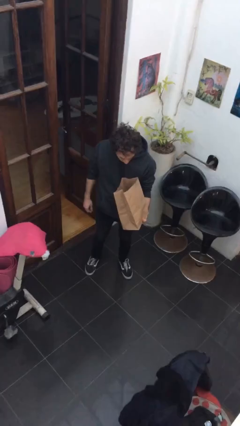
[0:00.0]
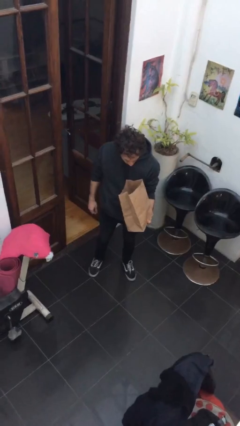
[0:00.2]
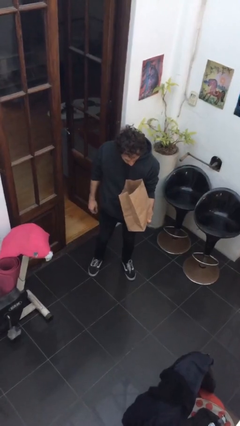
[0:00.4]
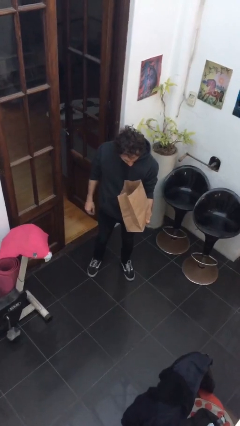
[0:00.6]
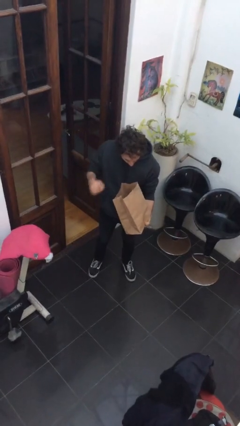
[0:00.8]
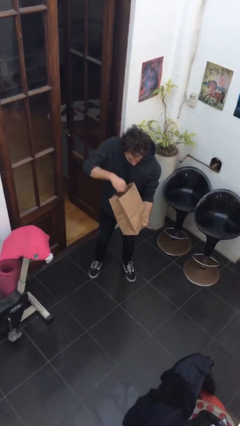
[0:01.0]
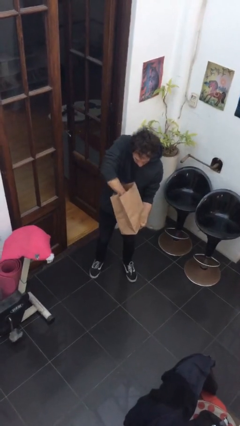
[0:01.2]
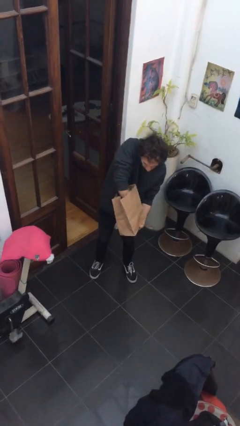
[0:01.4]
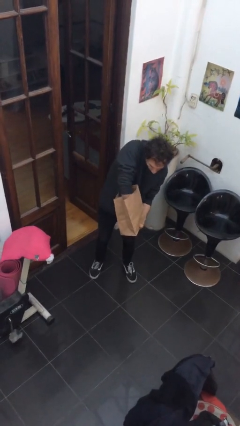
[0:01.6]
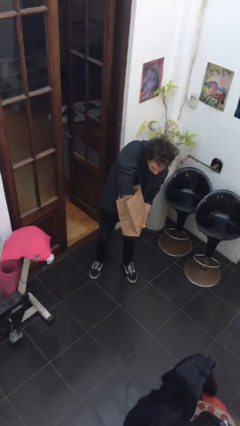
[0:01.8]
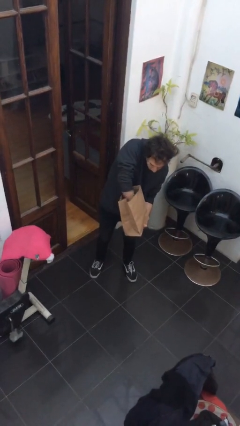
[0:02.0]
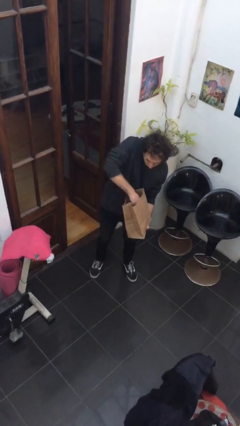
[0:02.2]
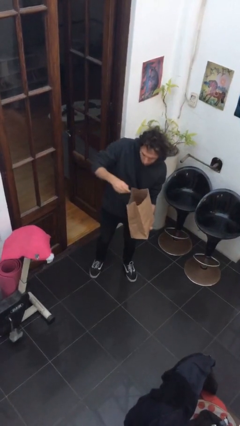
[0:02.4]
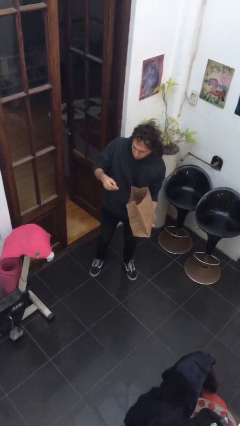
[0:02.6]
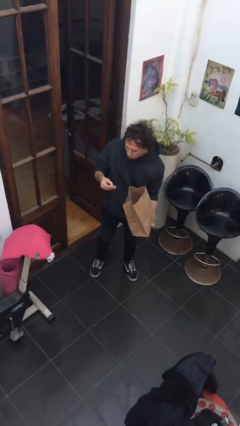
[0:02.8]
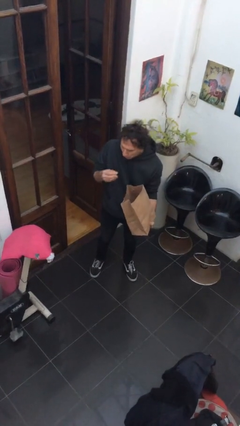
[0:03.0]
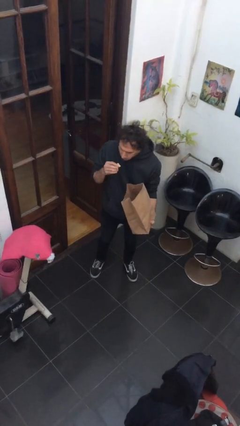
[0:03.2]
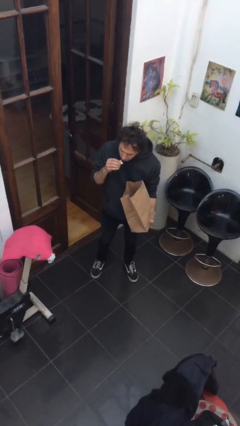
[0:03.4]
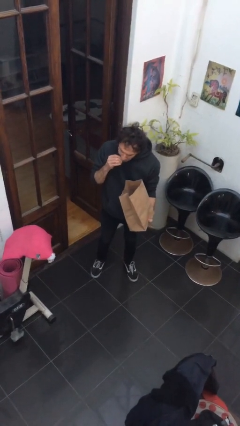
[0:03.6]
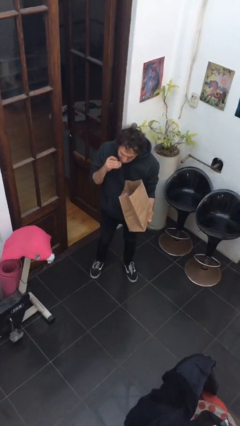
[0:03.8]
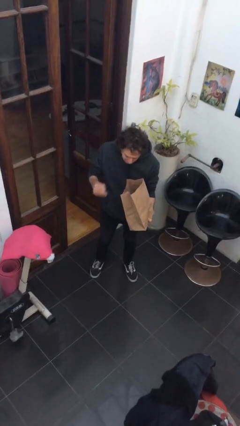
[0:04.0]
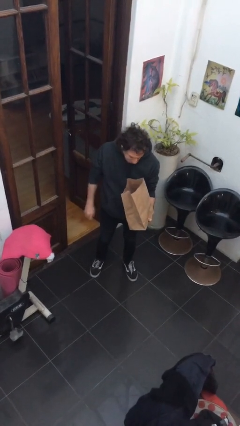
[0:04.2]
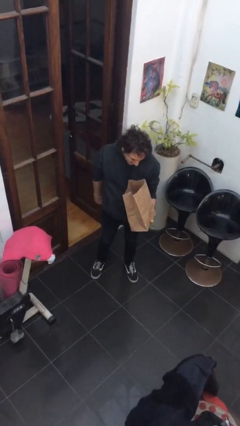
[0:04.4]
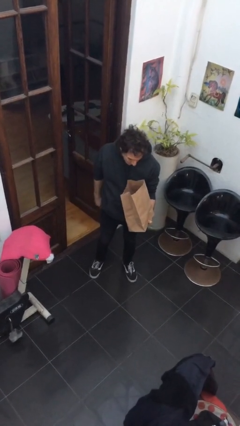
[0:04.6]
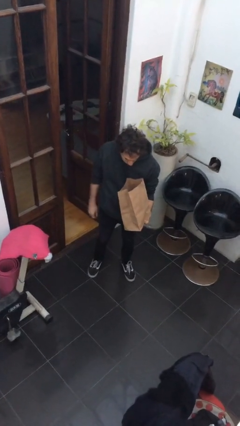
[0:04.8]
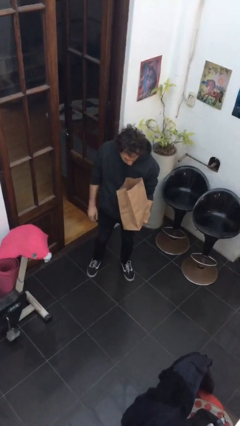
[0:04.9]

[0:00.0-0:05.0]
person eats snack from bag

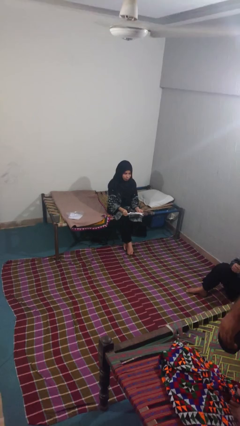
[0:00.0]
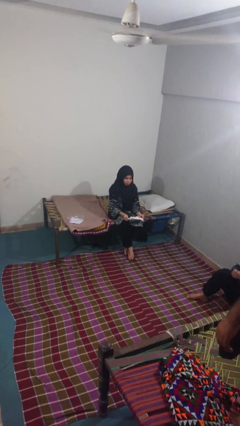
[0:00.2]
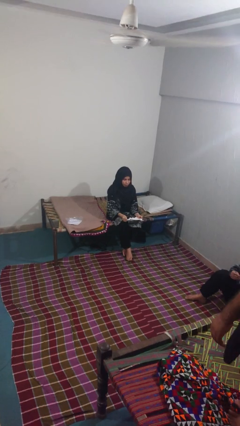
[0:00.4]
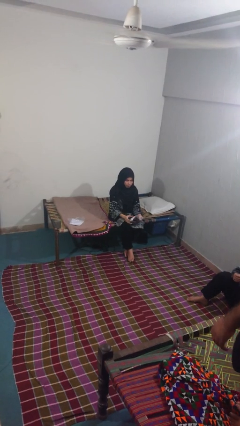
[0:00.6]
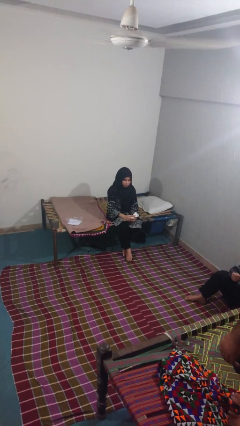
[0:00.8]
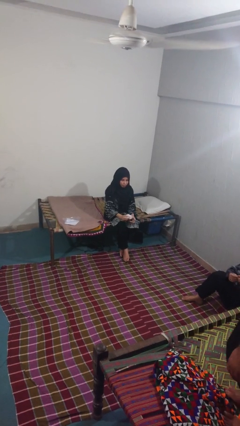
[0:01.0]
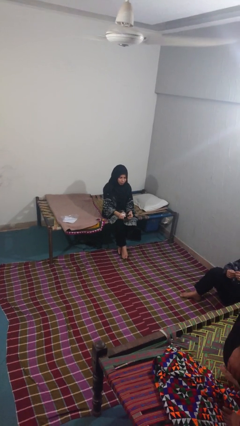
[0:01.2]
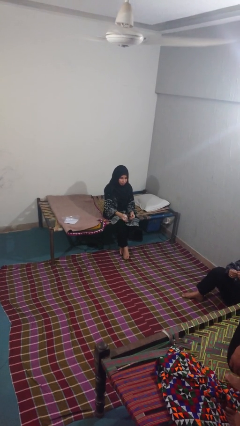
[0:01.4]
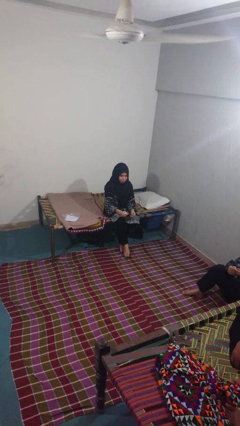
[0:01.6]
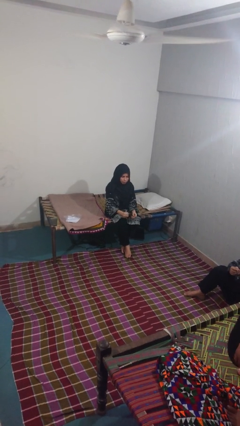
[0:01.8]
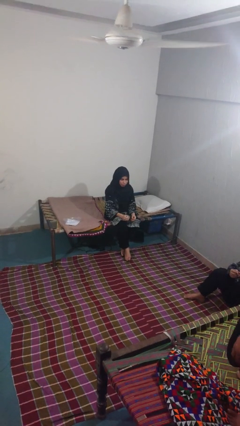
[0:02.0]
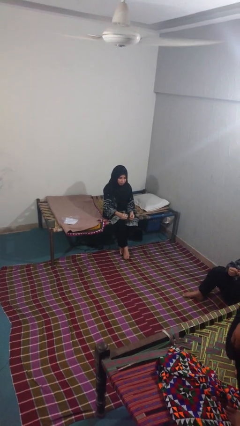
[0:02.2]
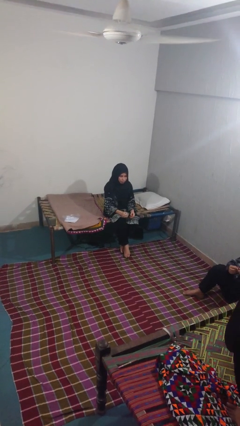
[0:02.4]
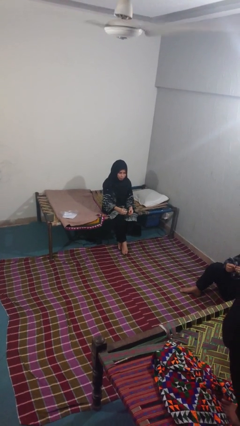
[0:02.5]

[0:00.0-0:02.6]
person crumples paper

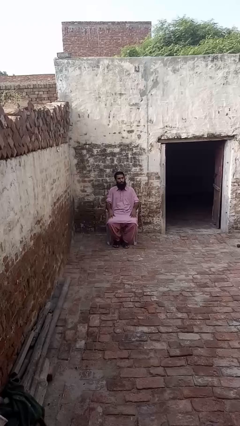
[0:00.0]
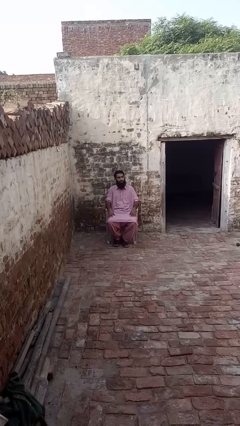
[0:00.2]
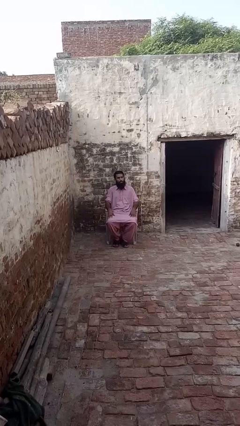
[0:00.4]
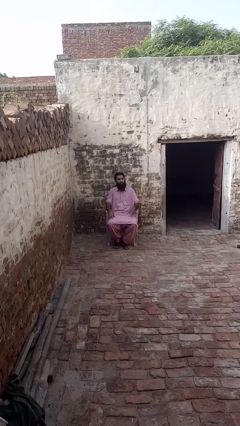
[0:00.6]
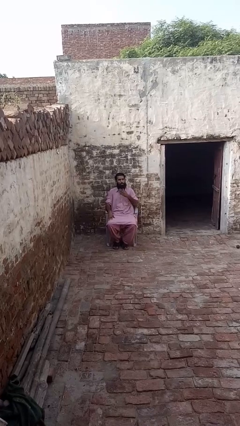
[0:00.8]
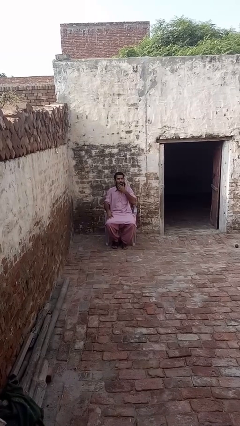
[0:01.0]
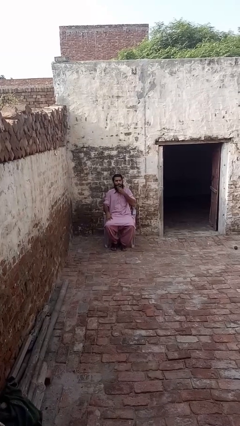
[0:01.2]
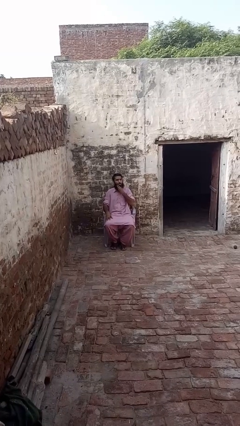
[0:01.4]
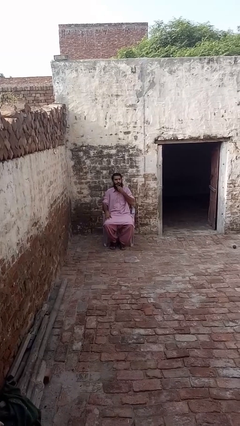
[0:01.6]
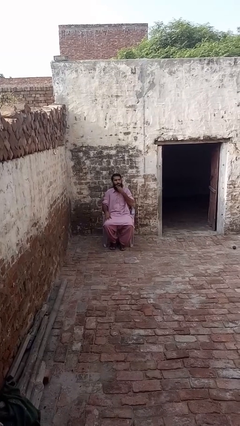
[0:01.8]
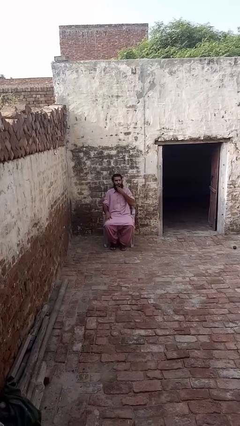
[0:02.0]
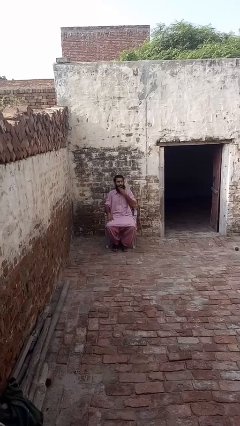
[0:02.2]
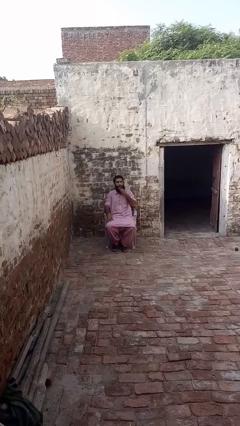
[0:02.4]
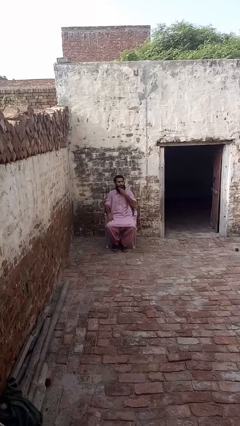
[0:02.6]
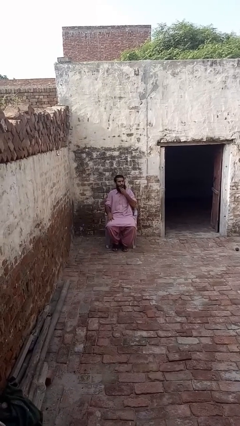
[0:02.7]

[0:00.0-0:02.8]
person strokes chin

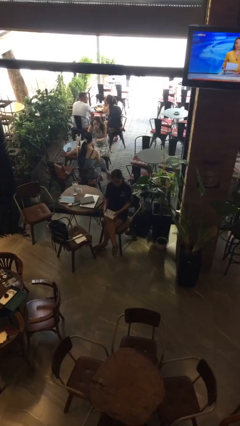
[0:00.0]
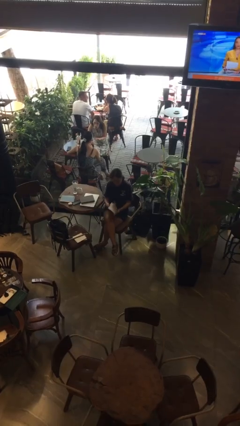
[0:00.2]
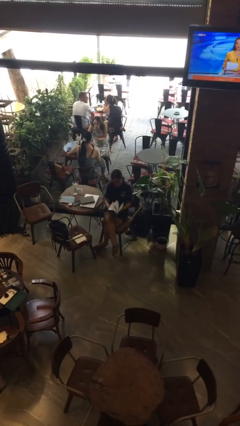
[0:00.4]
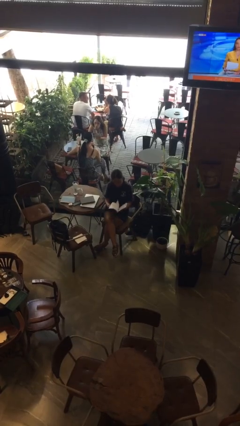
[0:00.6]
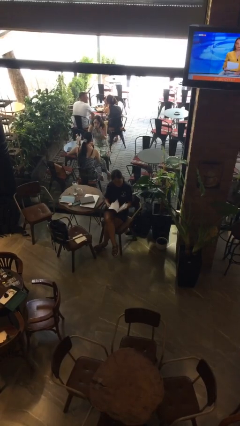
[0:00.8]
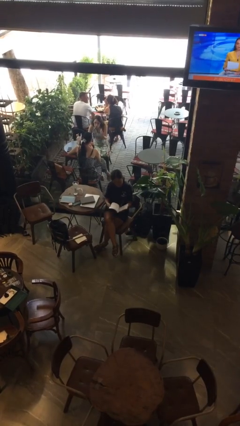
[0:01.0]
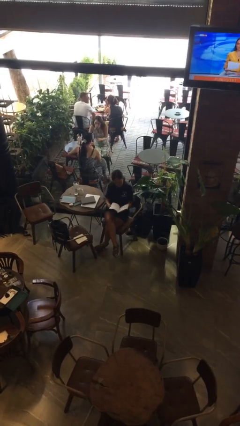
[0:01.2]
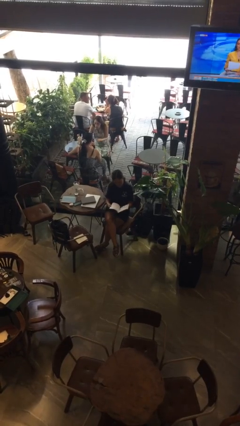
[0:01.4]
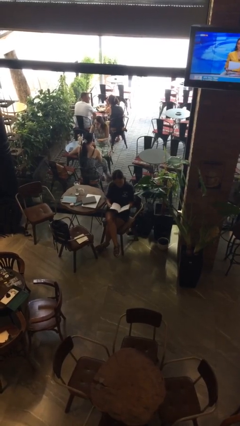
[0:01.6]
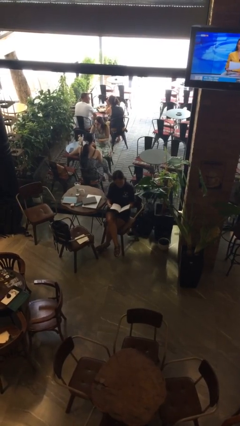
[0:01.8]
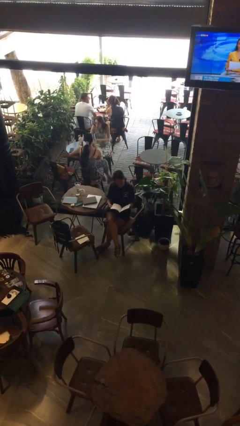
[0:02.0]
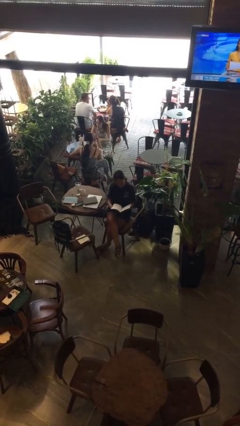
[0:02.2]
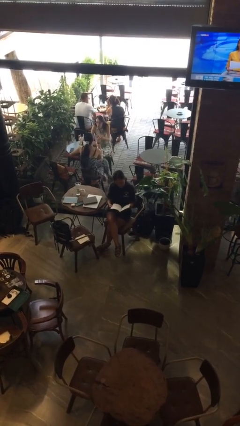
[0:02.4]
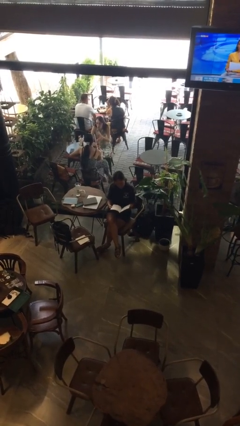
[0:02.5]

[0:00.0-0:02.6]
person reads magazine

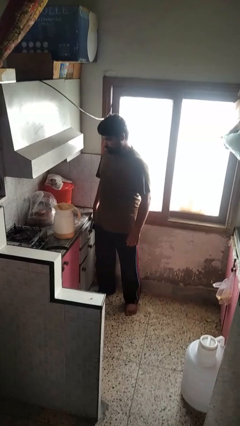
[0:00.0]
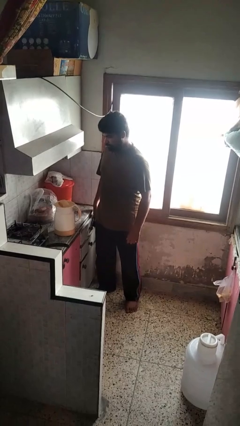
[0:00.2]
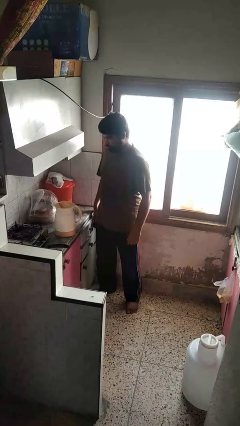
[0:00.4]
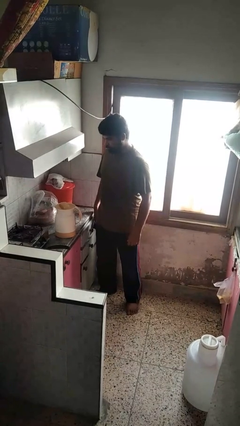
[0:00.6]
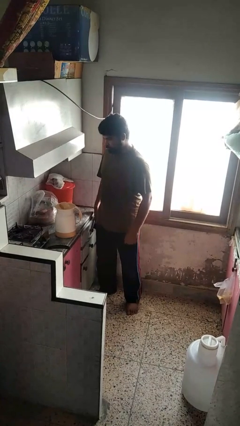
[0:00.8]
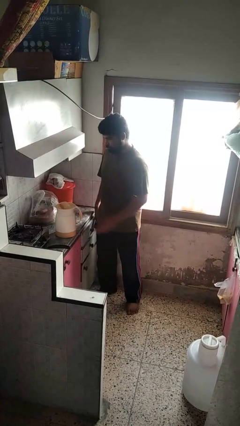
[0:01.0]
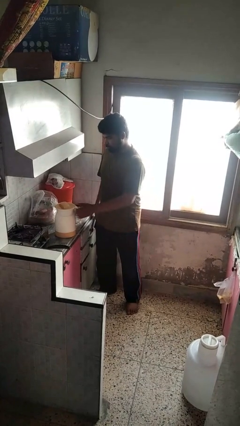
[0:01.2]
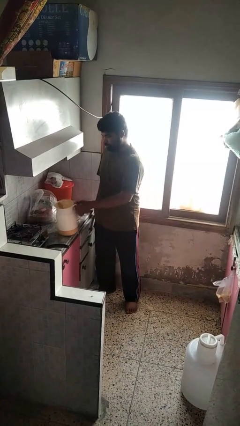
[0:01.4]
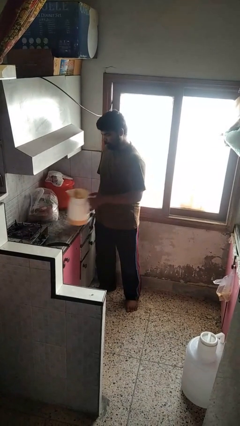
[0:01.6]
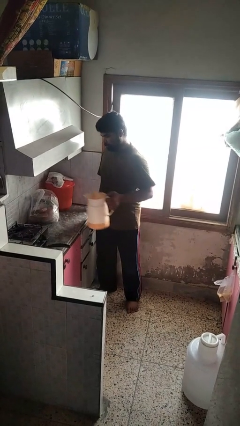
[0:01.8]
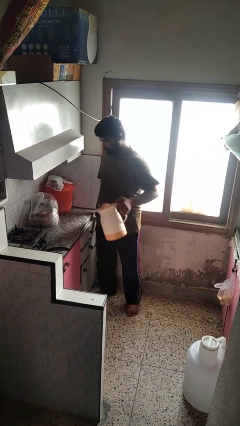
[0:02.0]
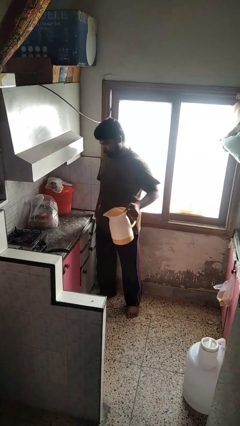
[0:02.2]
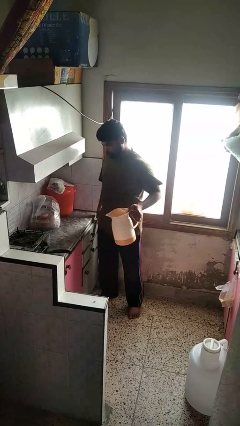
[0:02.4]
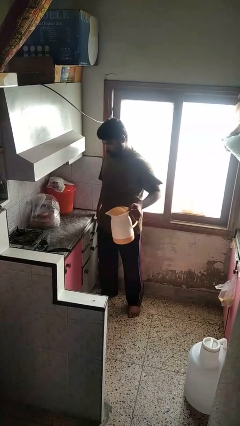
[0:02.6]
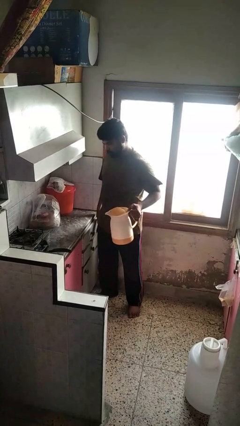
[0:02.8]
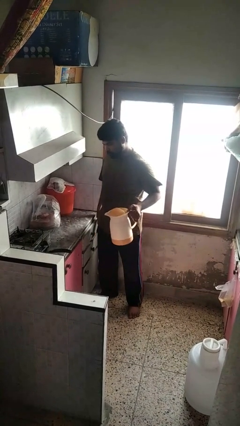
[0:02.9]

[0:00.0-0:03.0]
person picks up object from countertop

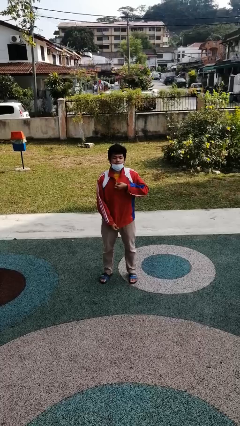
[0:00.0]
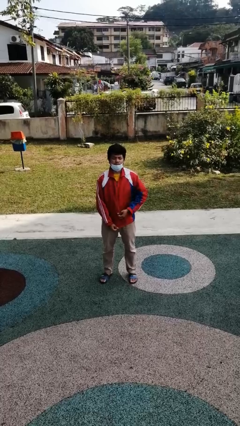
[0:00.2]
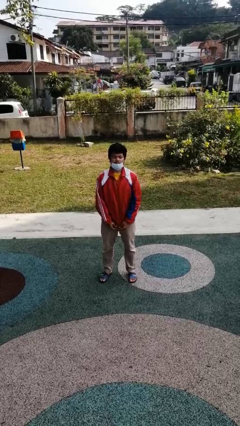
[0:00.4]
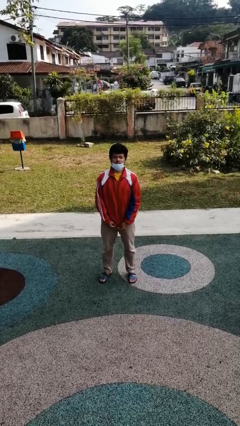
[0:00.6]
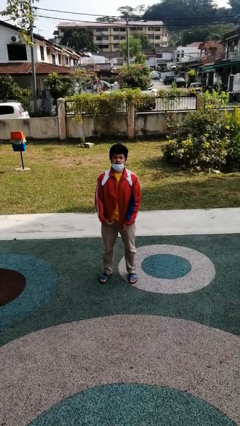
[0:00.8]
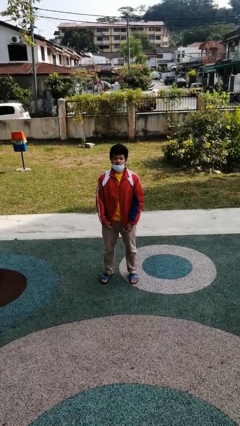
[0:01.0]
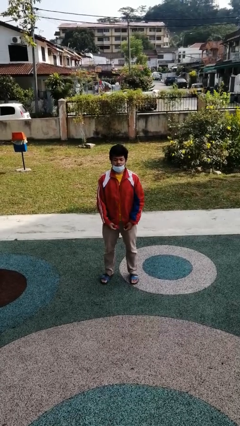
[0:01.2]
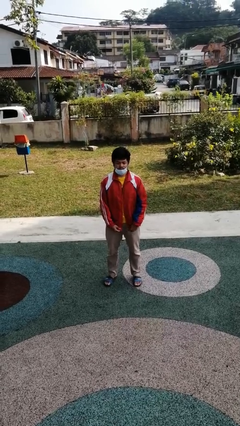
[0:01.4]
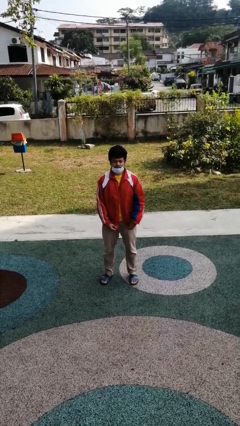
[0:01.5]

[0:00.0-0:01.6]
person unzips jacket
